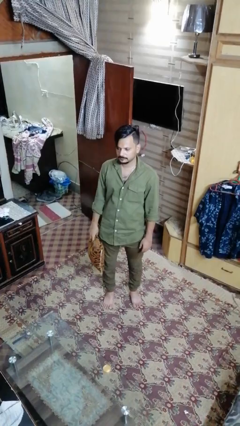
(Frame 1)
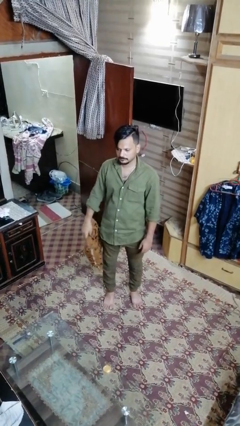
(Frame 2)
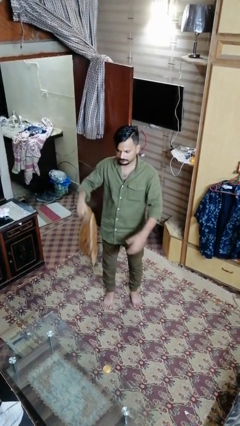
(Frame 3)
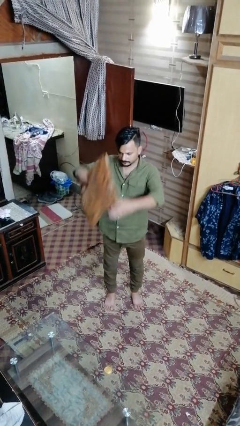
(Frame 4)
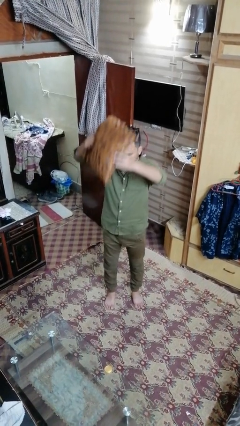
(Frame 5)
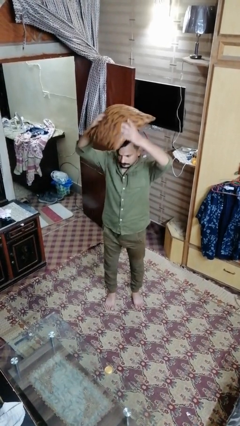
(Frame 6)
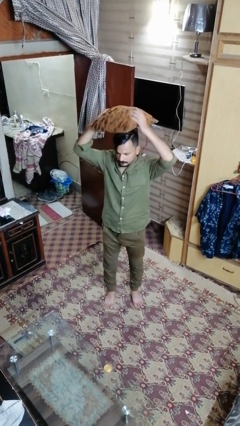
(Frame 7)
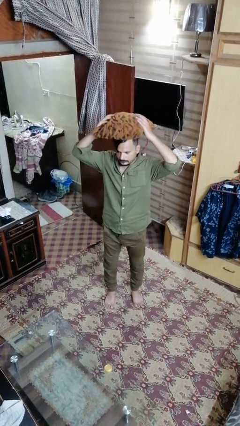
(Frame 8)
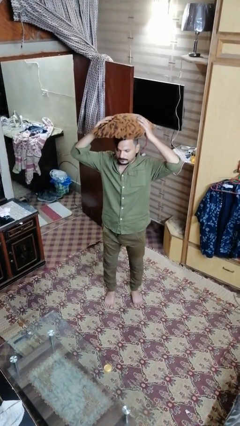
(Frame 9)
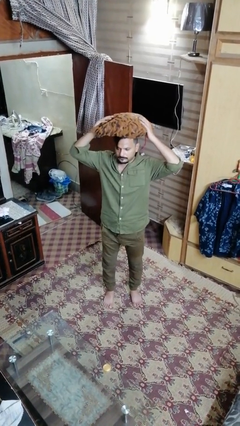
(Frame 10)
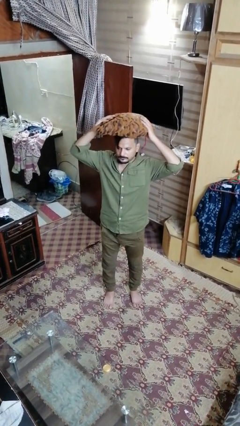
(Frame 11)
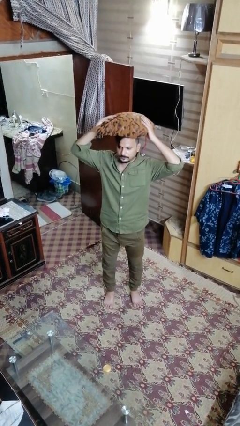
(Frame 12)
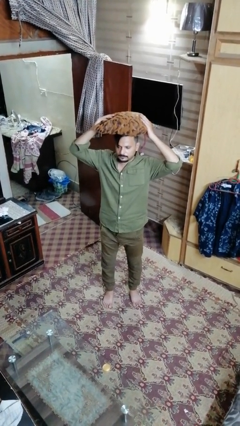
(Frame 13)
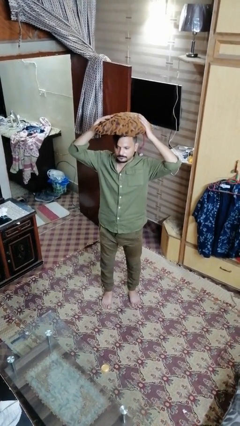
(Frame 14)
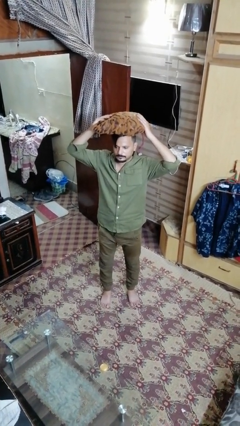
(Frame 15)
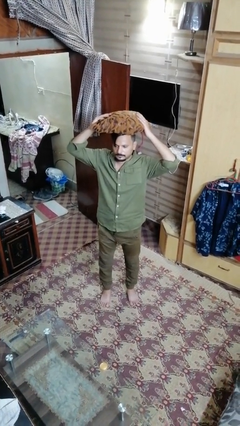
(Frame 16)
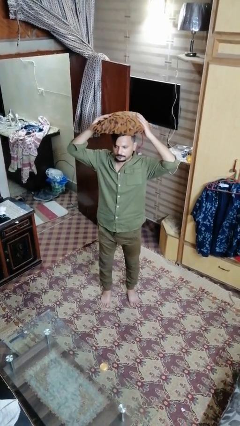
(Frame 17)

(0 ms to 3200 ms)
person holds object above head

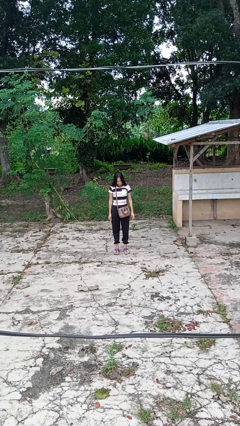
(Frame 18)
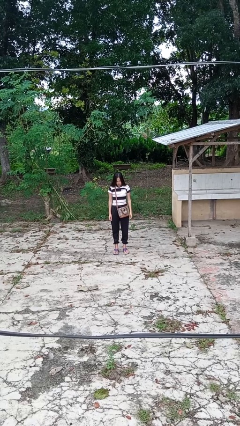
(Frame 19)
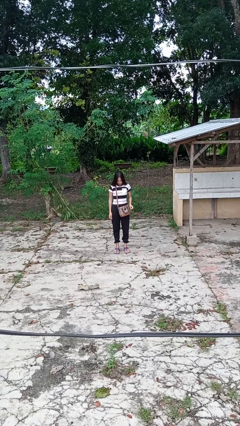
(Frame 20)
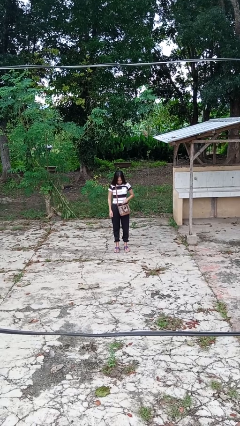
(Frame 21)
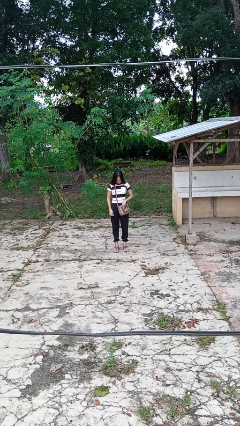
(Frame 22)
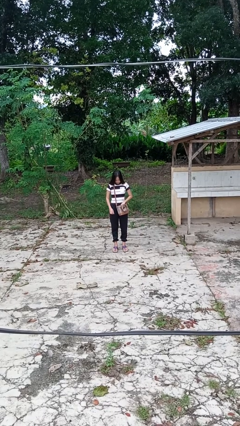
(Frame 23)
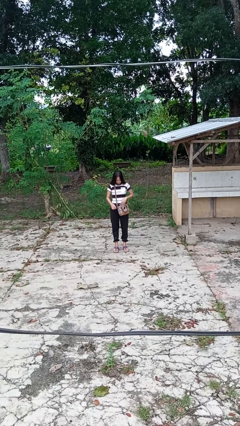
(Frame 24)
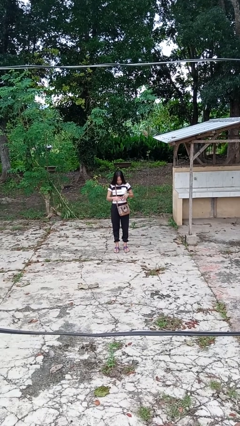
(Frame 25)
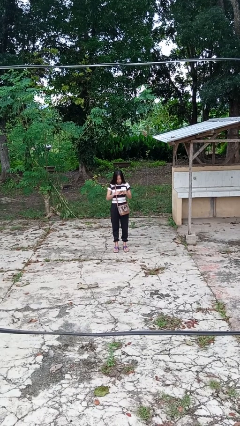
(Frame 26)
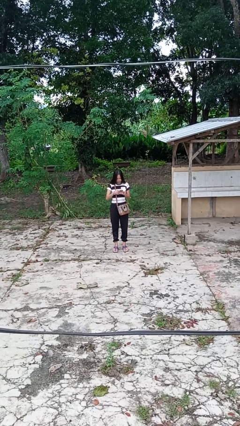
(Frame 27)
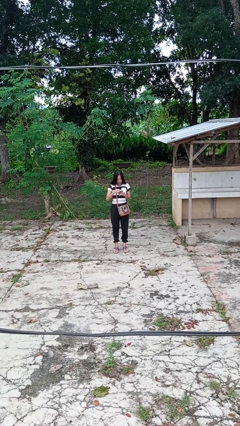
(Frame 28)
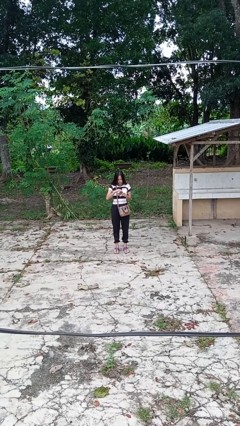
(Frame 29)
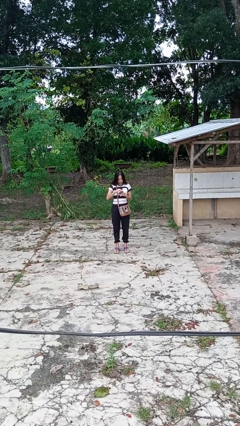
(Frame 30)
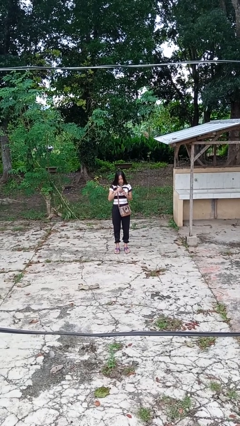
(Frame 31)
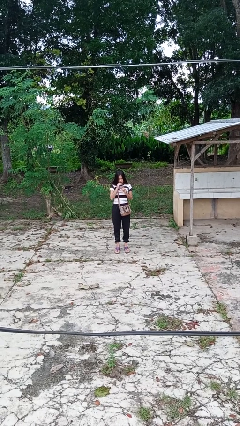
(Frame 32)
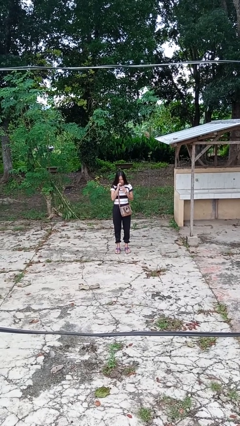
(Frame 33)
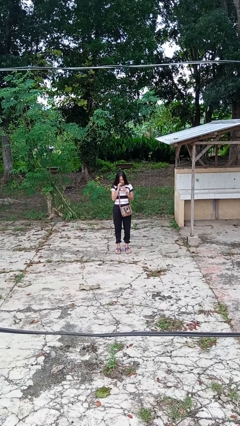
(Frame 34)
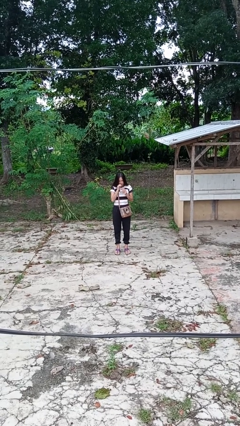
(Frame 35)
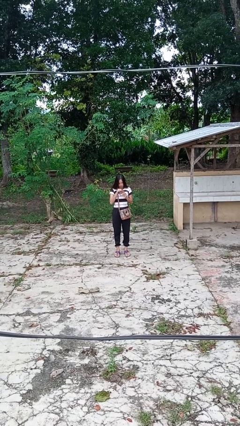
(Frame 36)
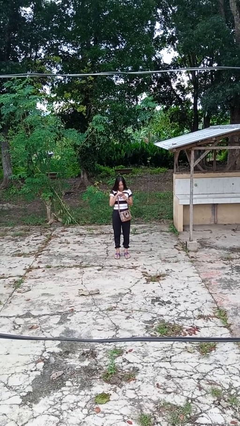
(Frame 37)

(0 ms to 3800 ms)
person eats snack from bag

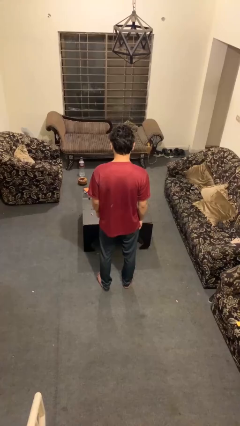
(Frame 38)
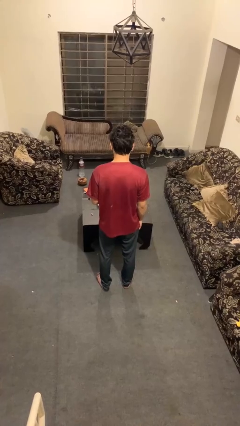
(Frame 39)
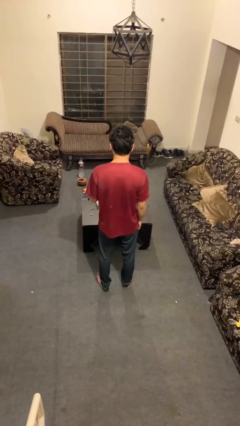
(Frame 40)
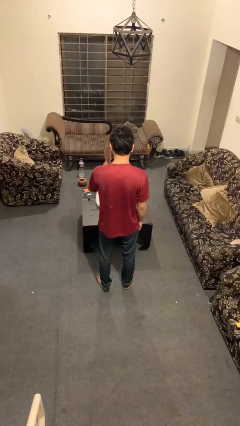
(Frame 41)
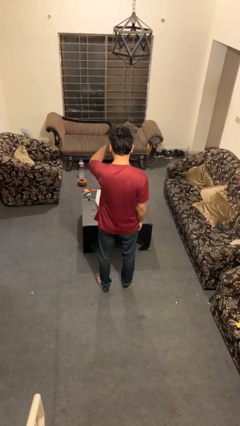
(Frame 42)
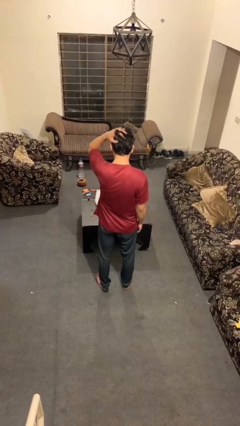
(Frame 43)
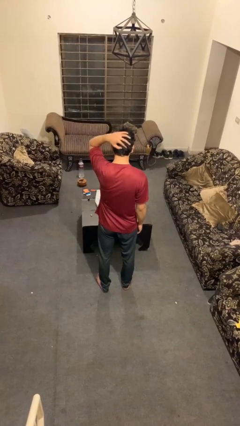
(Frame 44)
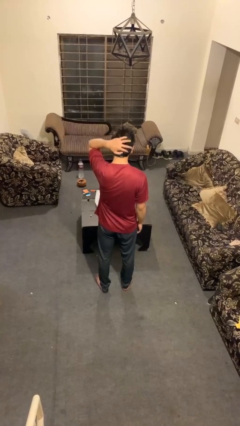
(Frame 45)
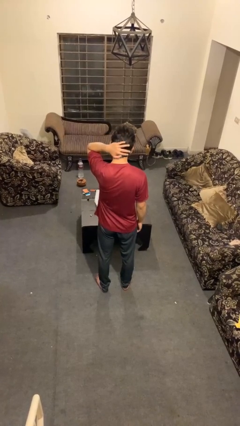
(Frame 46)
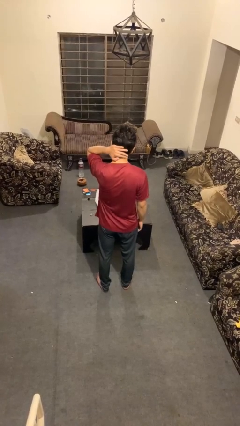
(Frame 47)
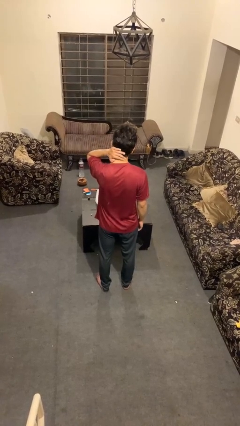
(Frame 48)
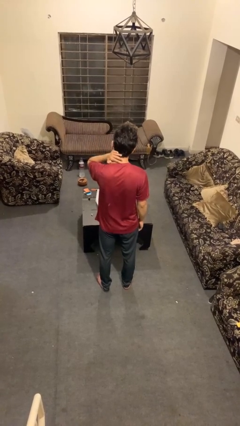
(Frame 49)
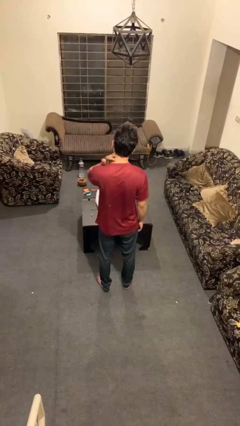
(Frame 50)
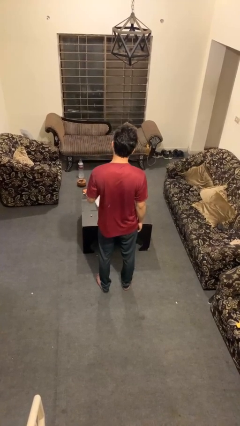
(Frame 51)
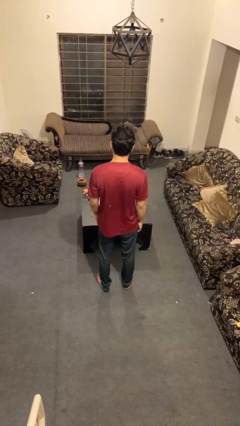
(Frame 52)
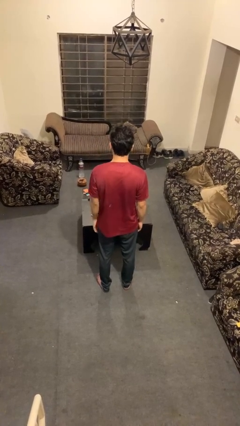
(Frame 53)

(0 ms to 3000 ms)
person strokes hair

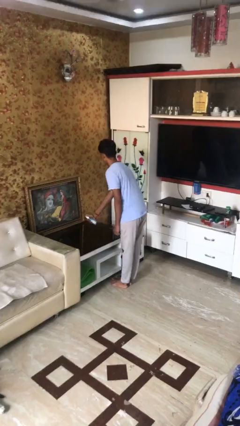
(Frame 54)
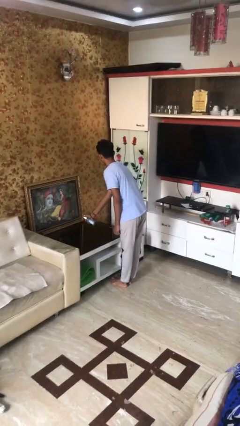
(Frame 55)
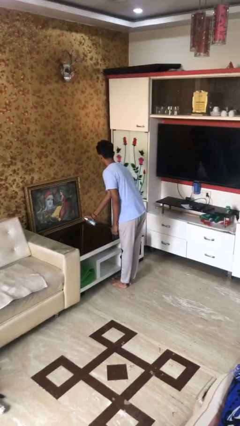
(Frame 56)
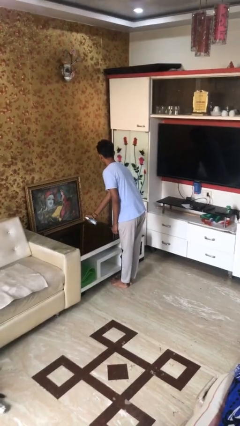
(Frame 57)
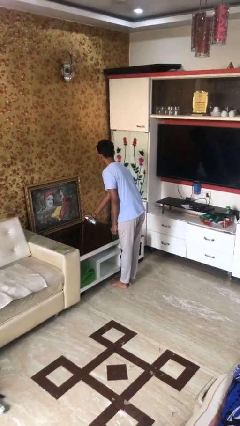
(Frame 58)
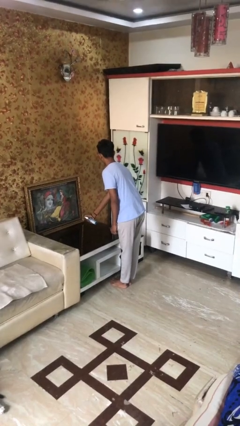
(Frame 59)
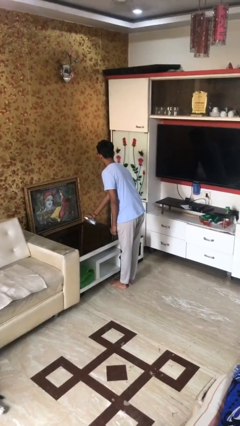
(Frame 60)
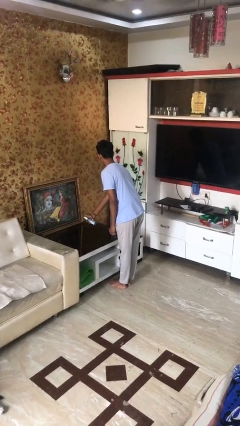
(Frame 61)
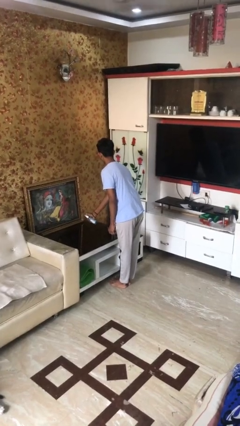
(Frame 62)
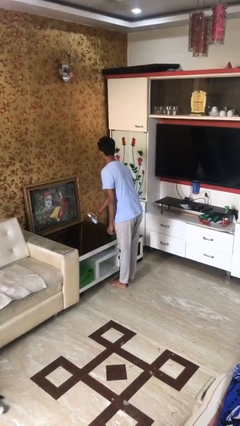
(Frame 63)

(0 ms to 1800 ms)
person sprays from bottle

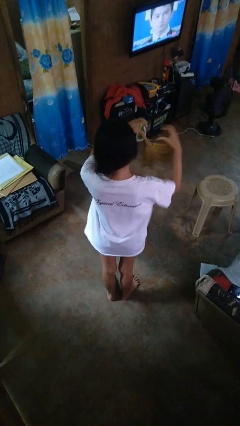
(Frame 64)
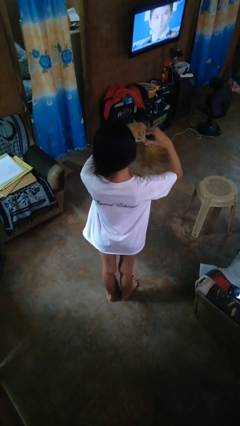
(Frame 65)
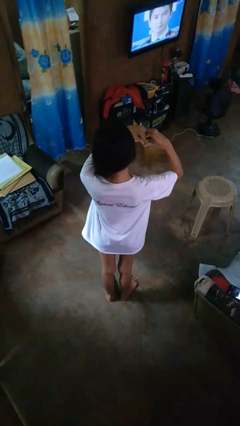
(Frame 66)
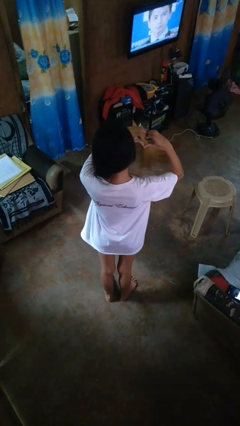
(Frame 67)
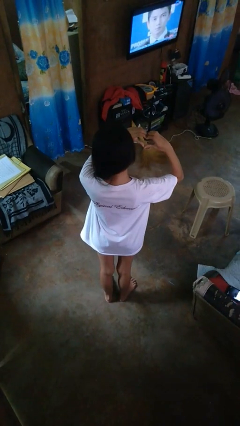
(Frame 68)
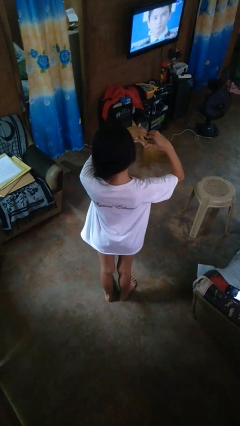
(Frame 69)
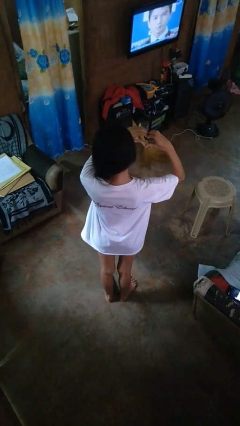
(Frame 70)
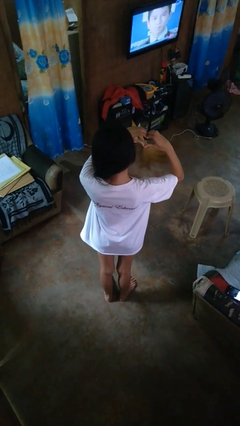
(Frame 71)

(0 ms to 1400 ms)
person gestures heart

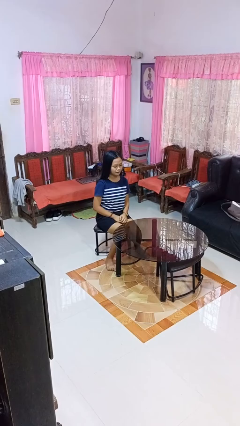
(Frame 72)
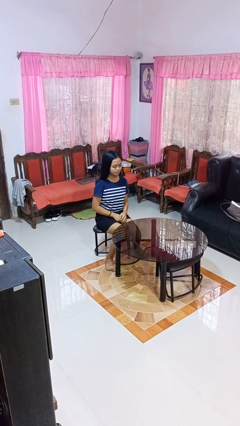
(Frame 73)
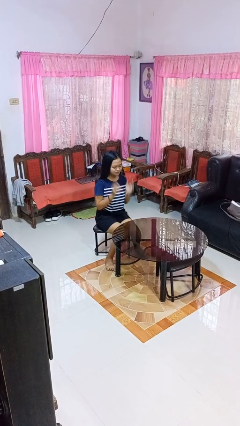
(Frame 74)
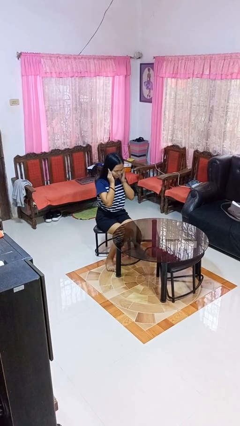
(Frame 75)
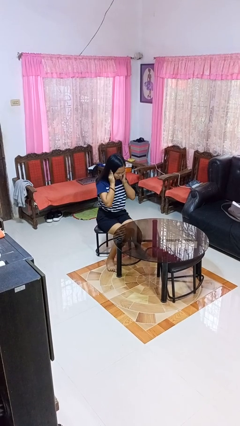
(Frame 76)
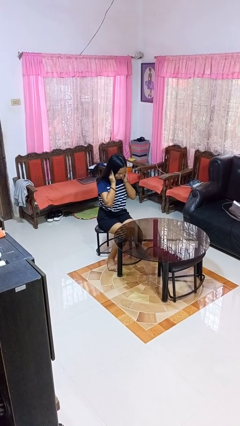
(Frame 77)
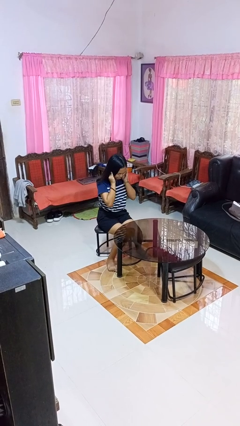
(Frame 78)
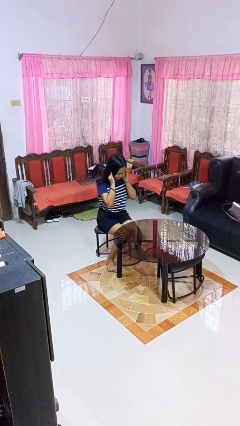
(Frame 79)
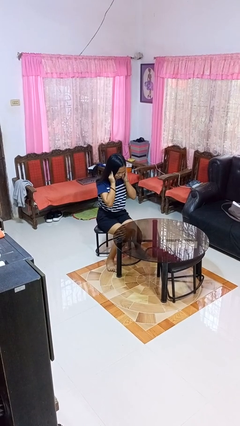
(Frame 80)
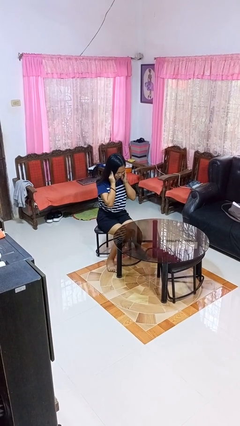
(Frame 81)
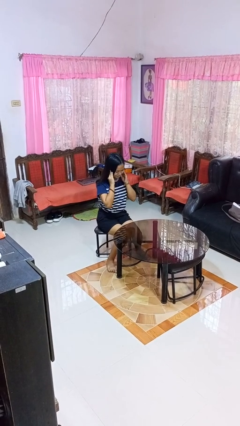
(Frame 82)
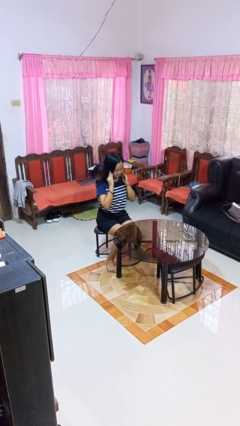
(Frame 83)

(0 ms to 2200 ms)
person puts fingers in ear

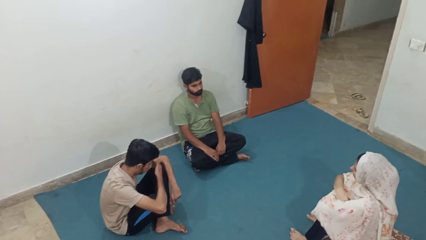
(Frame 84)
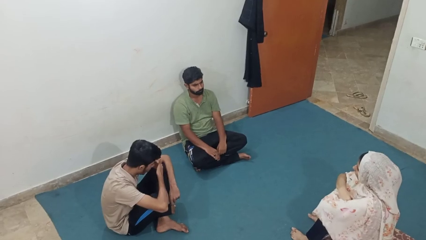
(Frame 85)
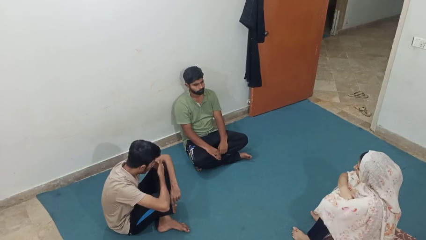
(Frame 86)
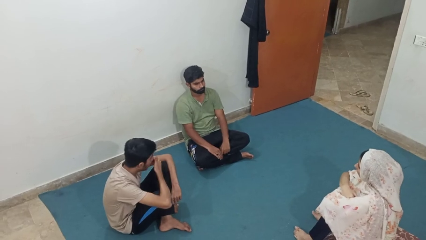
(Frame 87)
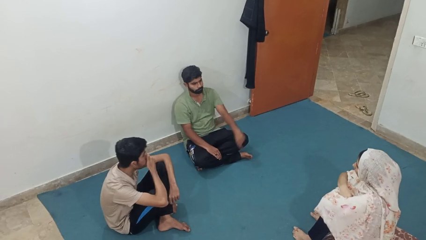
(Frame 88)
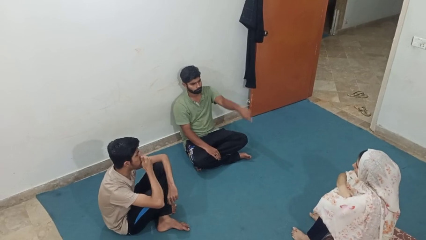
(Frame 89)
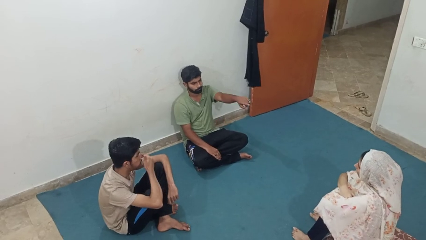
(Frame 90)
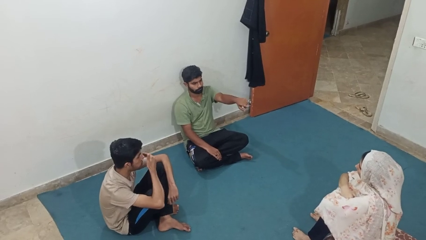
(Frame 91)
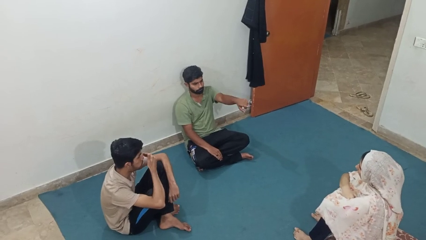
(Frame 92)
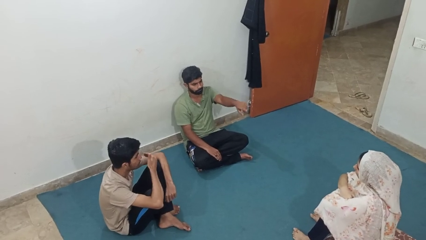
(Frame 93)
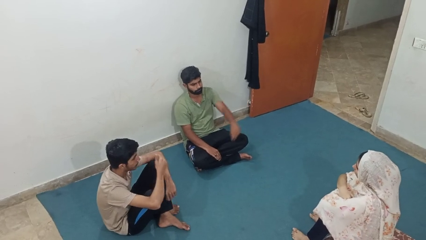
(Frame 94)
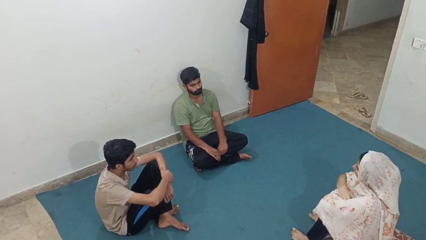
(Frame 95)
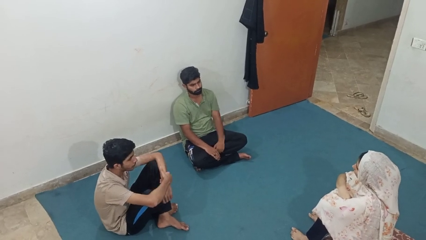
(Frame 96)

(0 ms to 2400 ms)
person points at person
